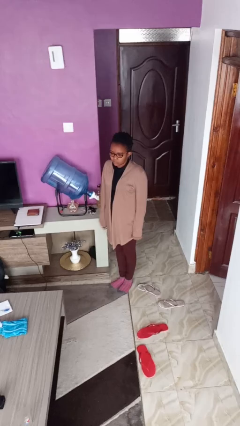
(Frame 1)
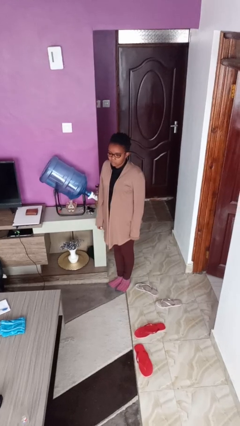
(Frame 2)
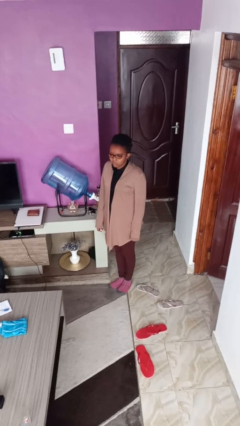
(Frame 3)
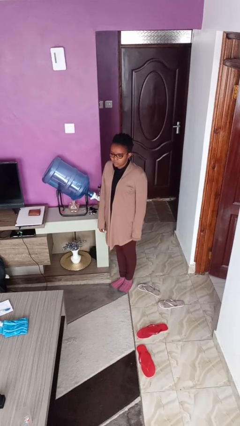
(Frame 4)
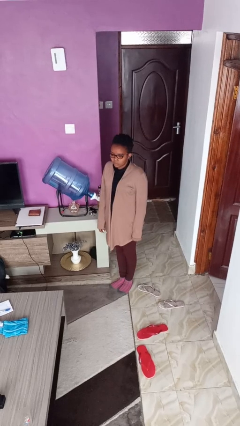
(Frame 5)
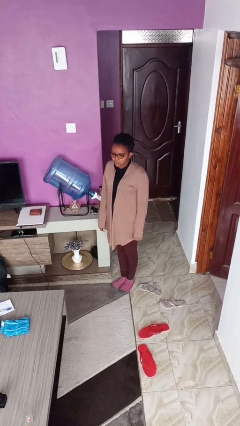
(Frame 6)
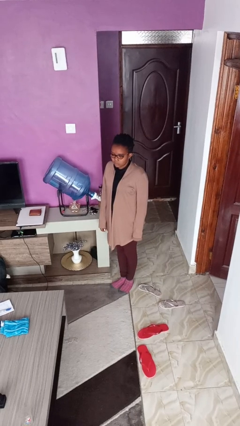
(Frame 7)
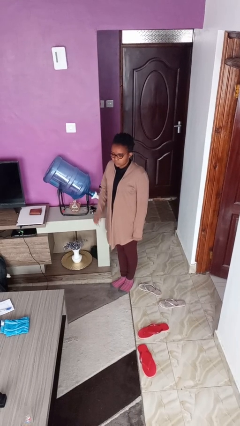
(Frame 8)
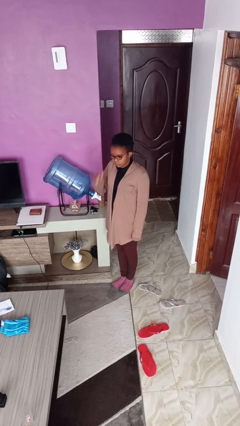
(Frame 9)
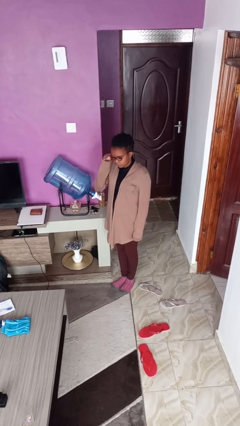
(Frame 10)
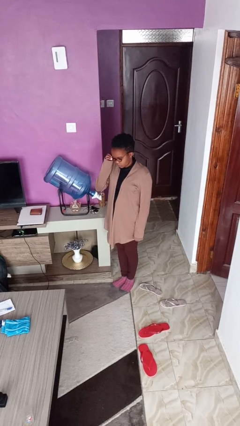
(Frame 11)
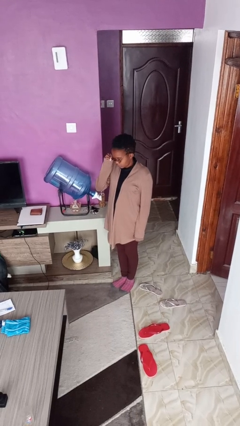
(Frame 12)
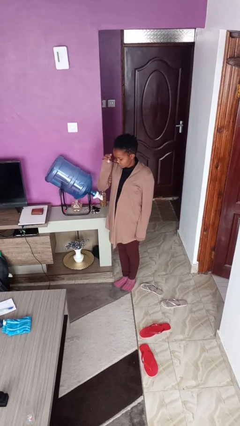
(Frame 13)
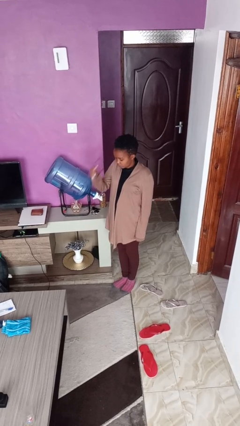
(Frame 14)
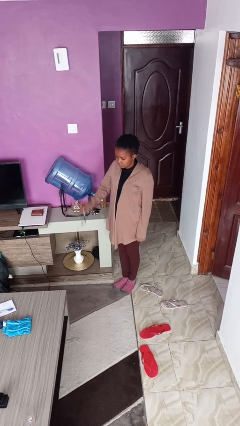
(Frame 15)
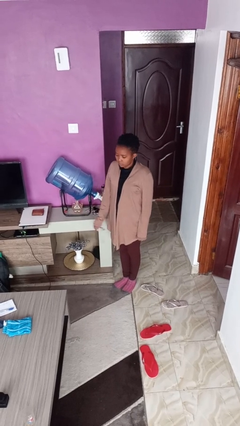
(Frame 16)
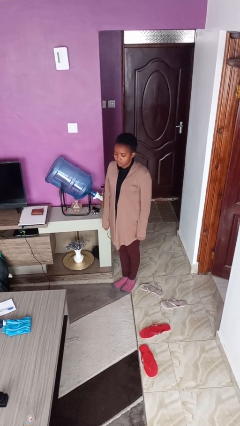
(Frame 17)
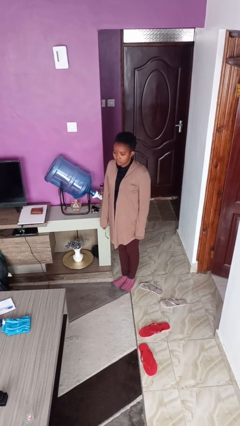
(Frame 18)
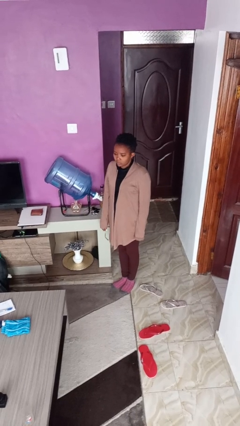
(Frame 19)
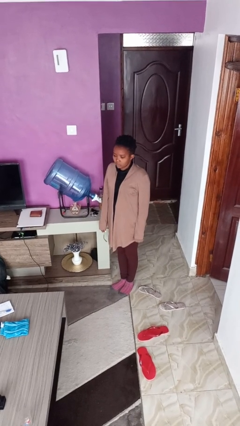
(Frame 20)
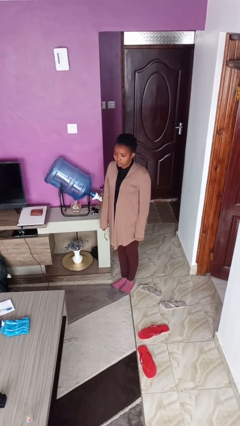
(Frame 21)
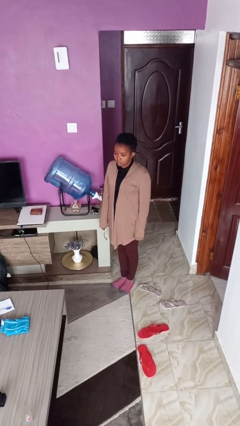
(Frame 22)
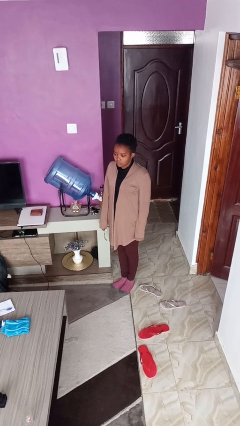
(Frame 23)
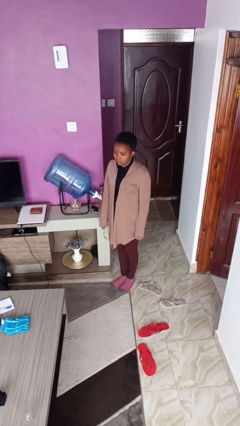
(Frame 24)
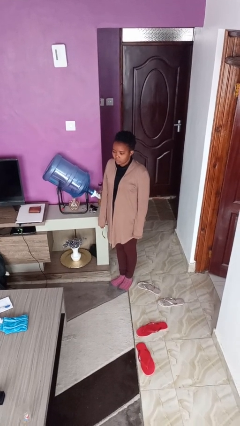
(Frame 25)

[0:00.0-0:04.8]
person takes off glasses

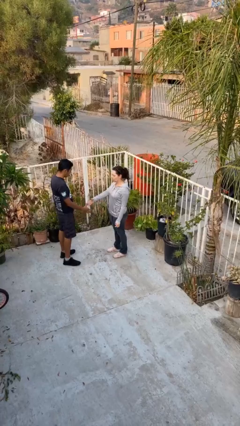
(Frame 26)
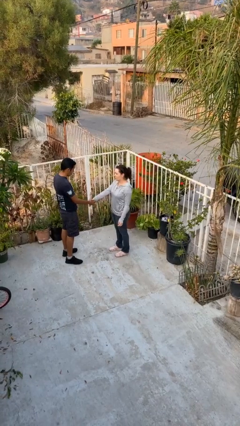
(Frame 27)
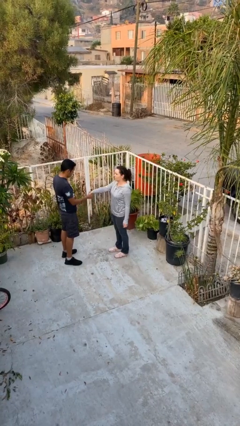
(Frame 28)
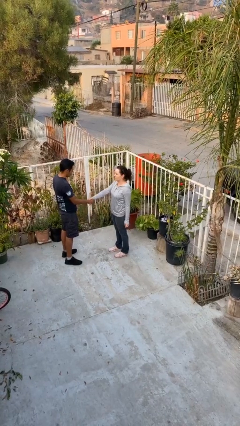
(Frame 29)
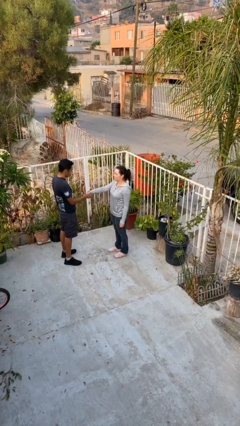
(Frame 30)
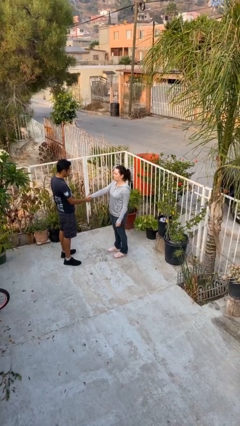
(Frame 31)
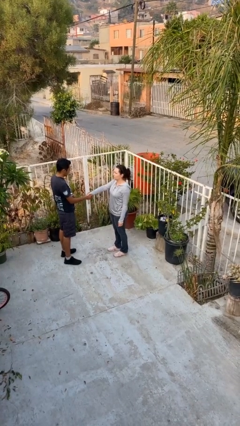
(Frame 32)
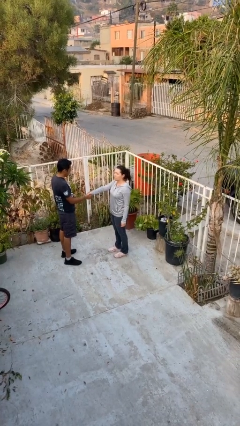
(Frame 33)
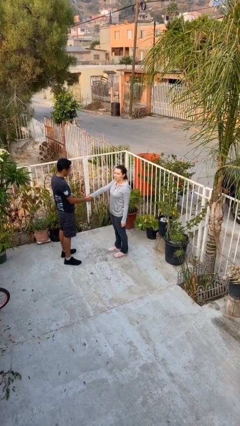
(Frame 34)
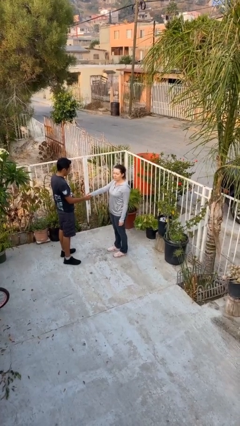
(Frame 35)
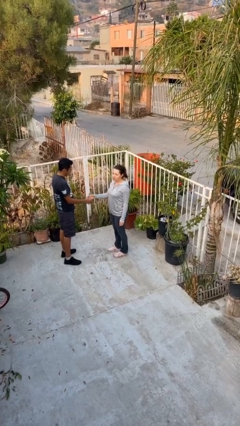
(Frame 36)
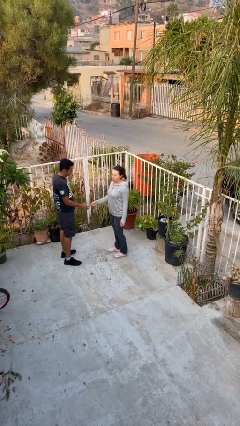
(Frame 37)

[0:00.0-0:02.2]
person shakes hand

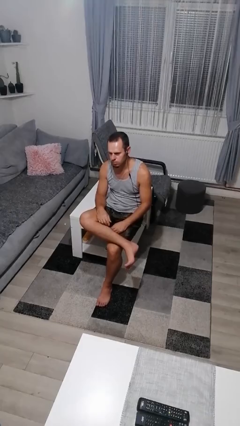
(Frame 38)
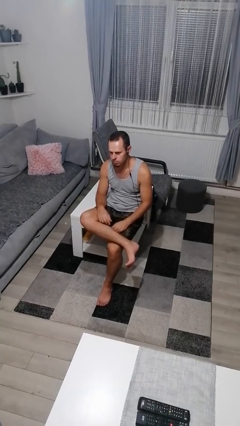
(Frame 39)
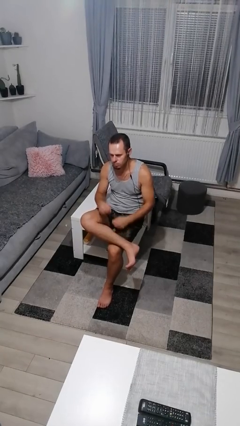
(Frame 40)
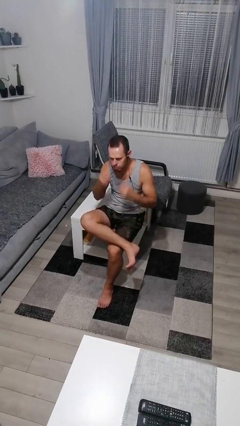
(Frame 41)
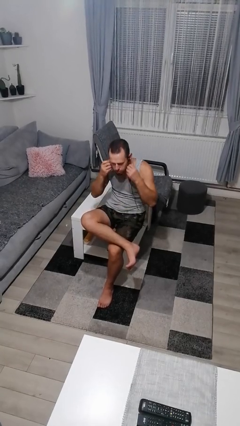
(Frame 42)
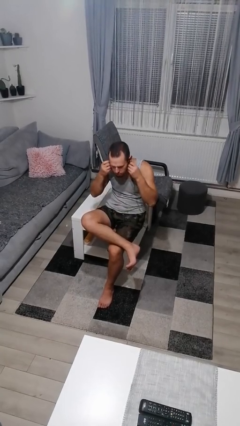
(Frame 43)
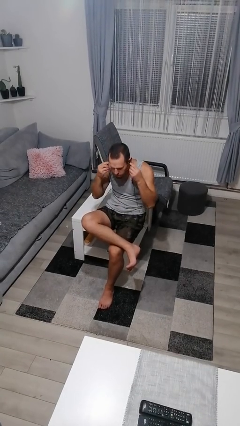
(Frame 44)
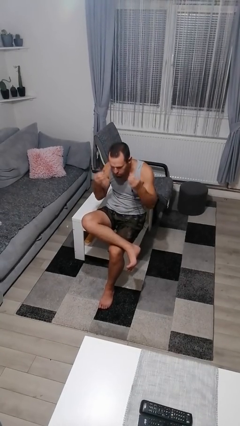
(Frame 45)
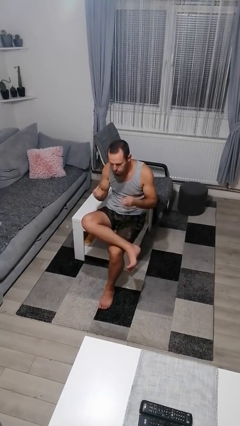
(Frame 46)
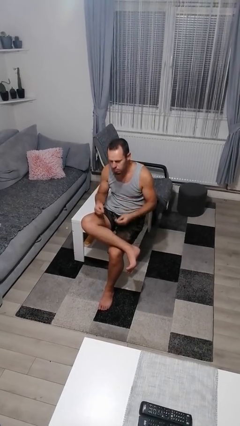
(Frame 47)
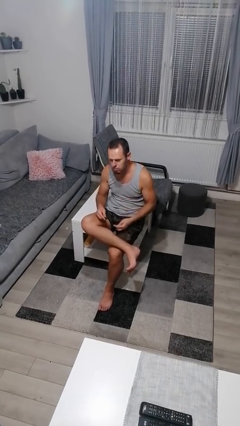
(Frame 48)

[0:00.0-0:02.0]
person takes off headphones

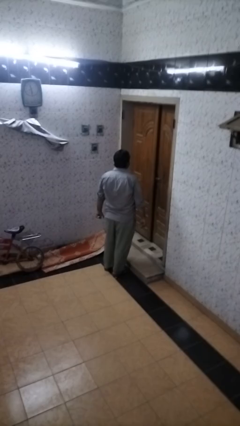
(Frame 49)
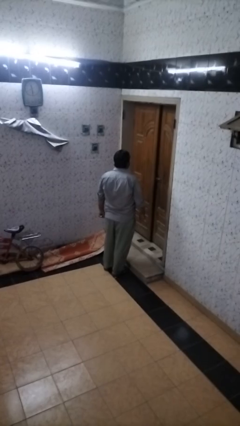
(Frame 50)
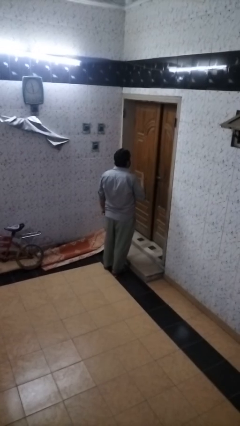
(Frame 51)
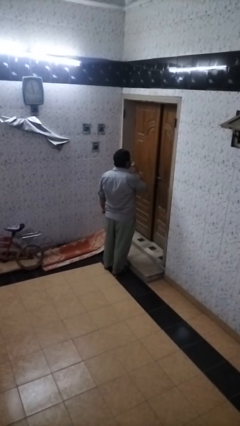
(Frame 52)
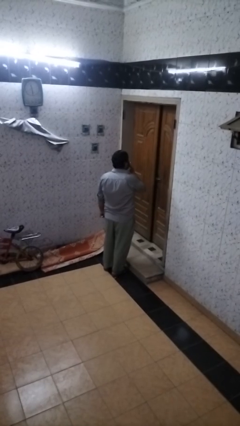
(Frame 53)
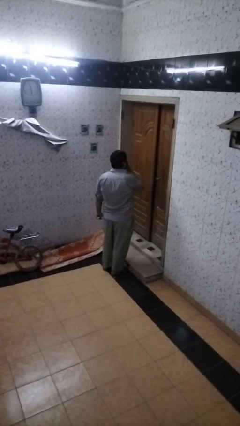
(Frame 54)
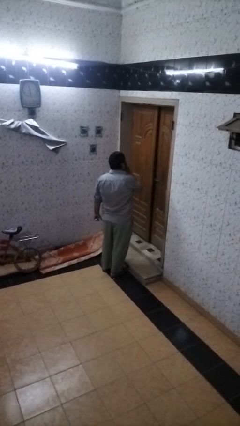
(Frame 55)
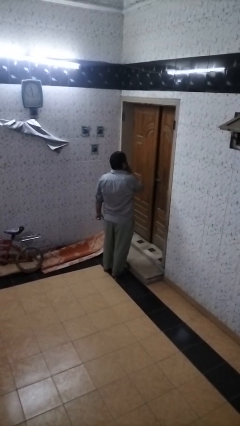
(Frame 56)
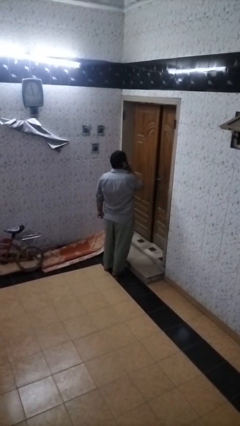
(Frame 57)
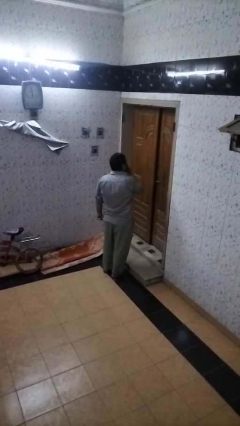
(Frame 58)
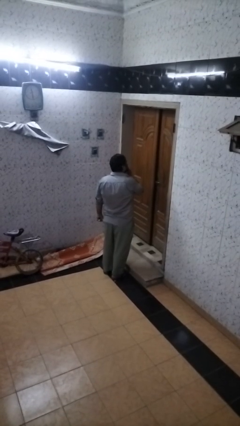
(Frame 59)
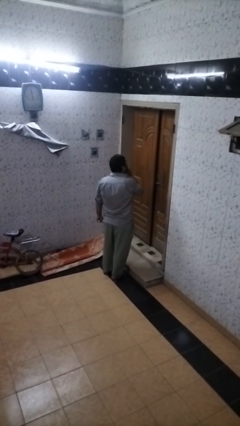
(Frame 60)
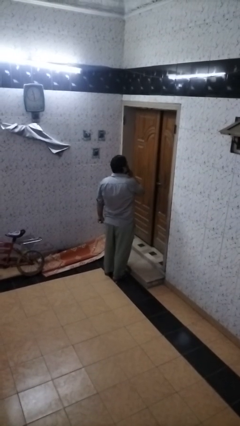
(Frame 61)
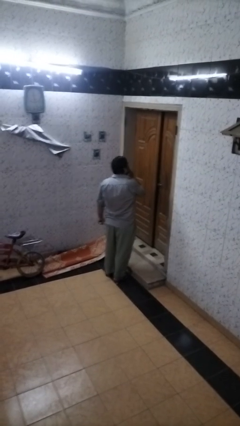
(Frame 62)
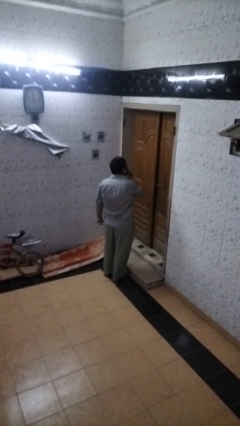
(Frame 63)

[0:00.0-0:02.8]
person brushes teeth

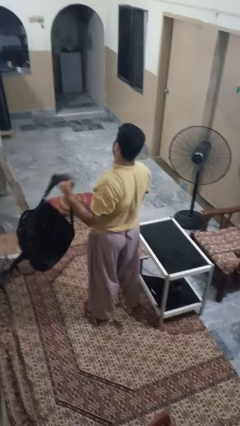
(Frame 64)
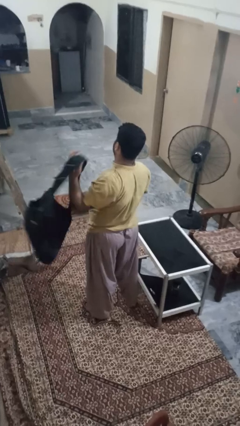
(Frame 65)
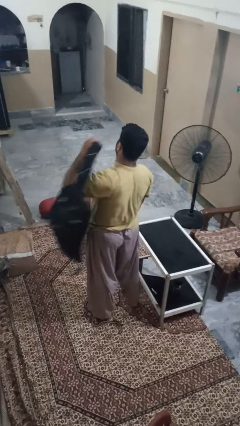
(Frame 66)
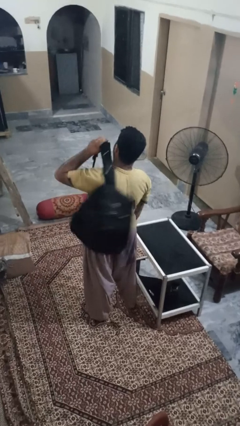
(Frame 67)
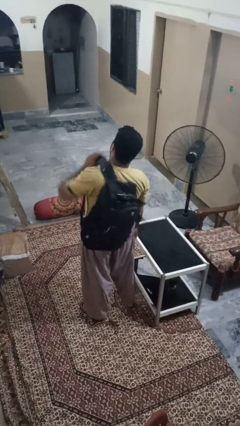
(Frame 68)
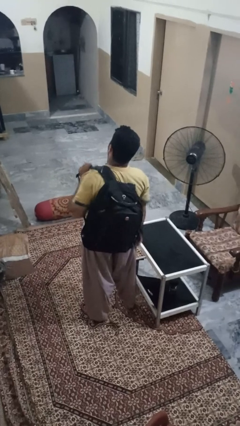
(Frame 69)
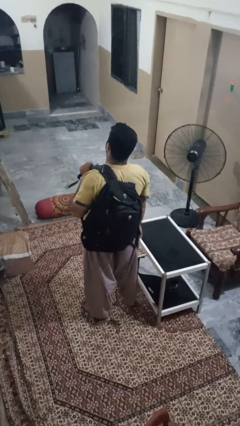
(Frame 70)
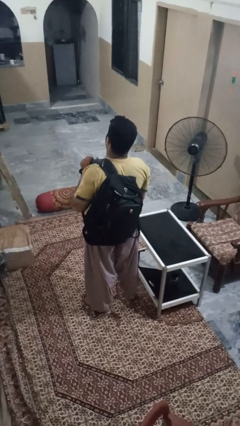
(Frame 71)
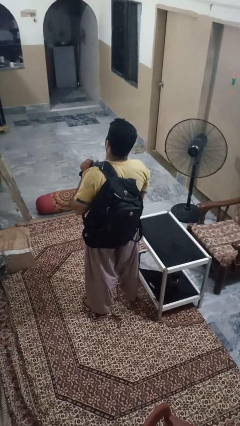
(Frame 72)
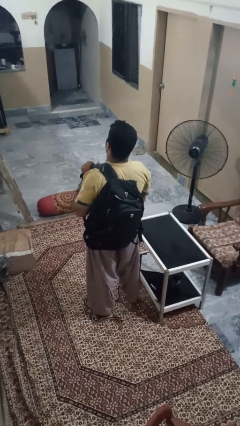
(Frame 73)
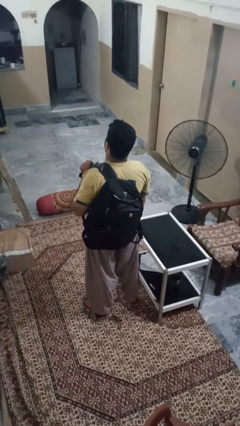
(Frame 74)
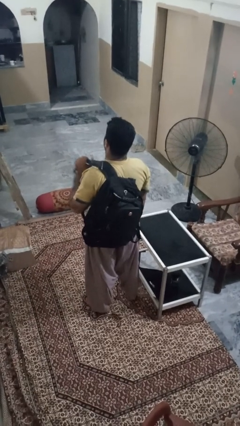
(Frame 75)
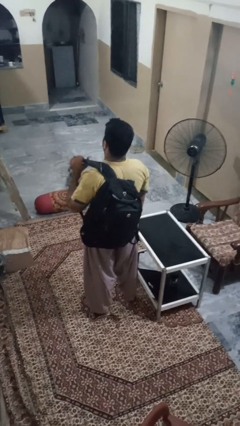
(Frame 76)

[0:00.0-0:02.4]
person puts on backpack

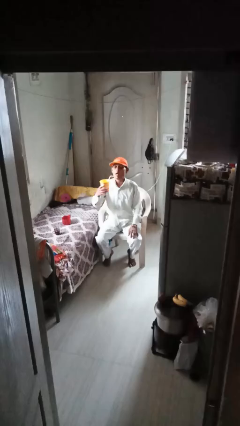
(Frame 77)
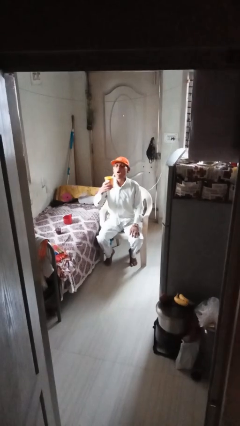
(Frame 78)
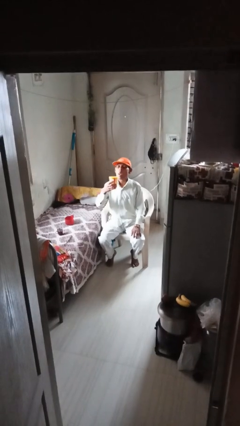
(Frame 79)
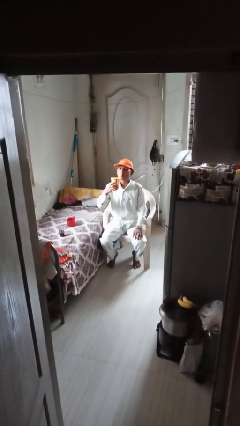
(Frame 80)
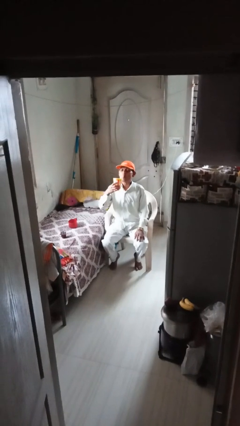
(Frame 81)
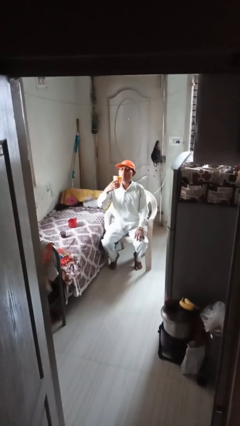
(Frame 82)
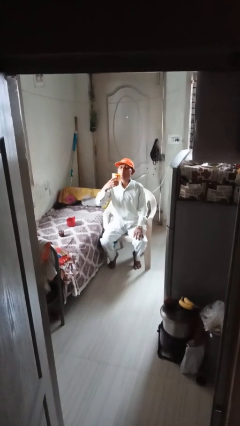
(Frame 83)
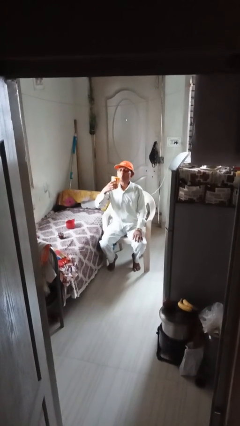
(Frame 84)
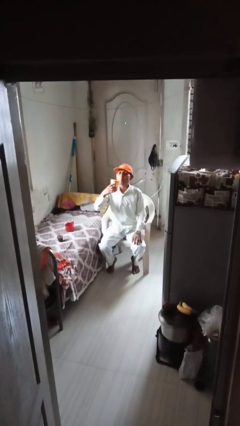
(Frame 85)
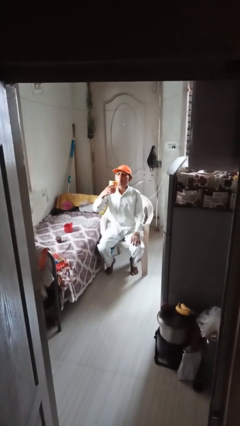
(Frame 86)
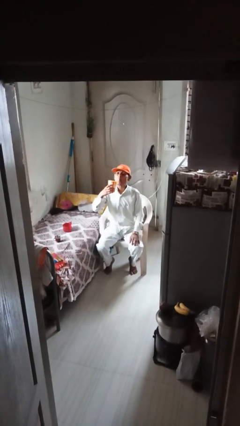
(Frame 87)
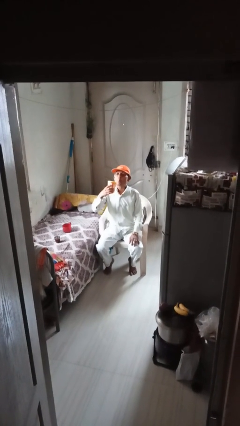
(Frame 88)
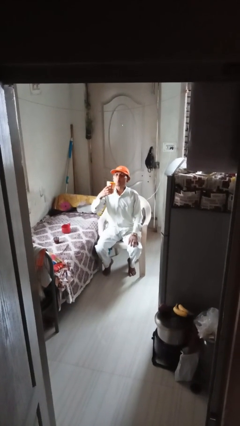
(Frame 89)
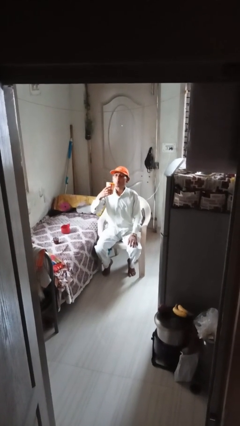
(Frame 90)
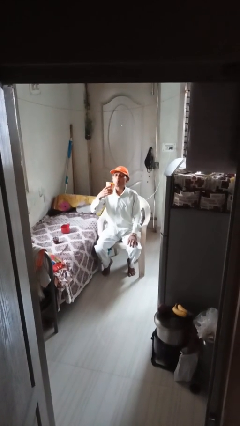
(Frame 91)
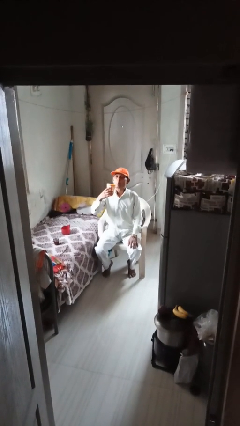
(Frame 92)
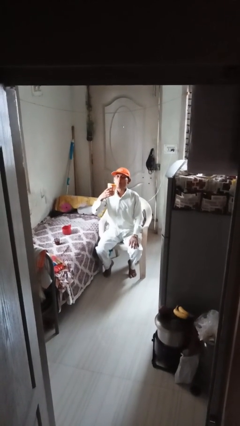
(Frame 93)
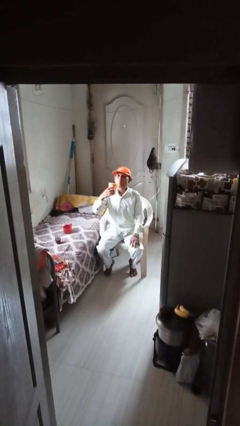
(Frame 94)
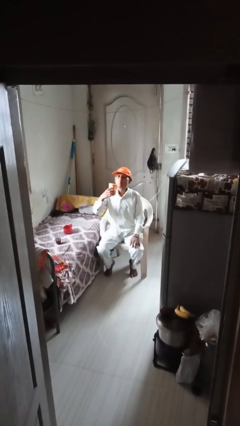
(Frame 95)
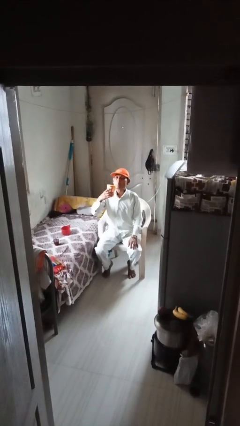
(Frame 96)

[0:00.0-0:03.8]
person drinks from straw
